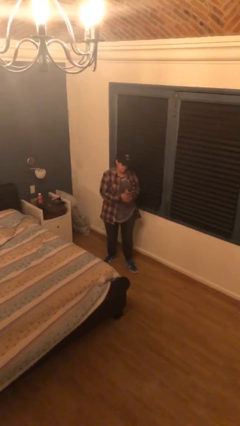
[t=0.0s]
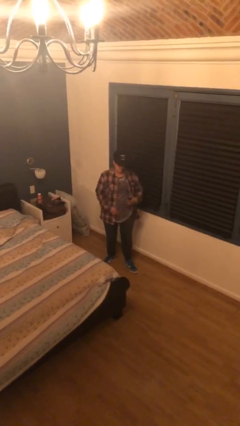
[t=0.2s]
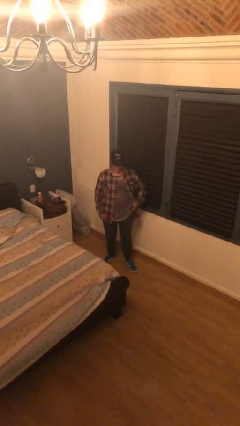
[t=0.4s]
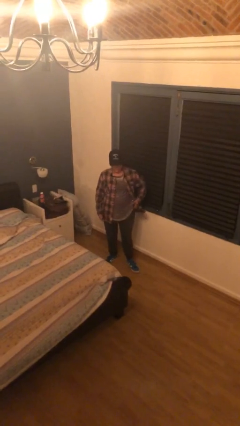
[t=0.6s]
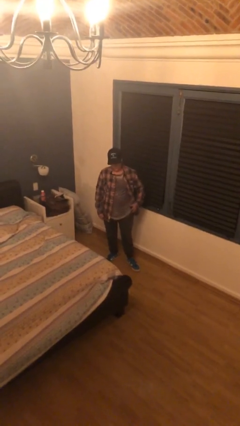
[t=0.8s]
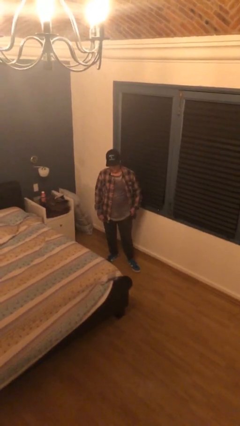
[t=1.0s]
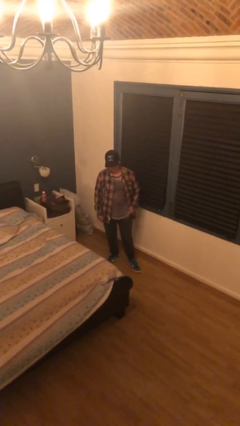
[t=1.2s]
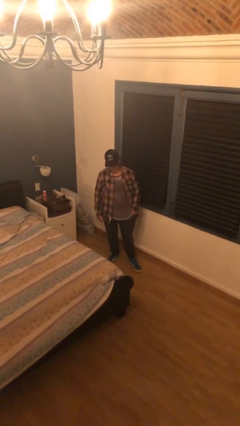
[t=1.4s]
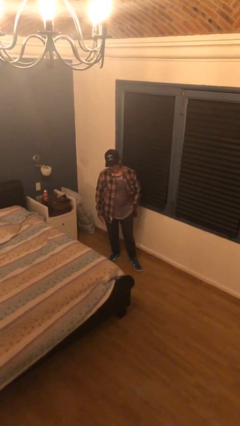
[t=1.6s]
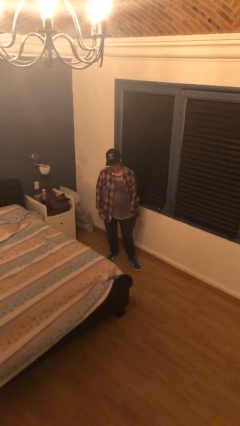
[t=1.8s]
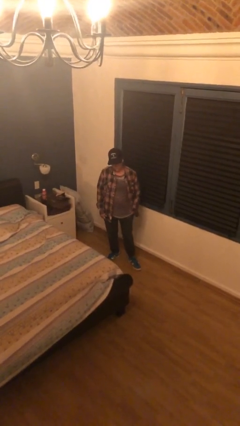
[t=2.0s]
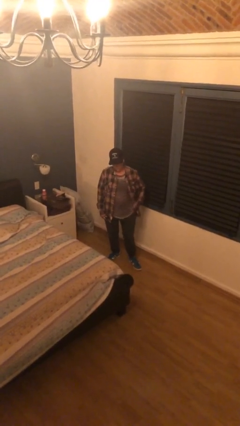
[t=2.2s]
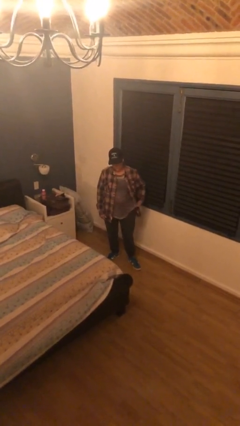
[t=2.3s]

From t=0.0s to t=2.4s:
person puts phone into pocket

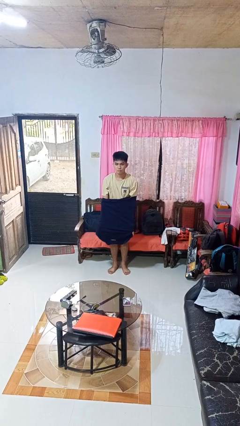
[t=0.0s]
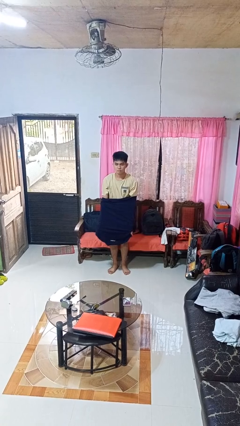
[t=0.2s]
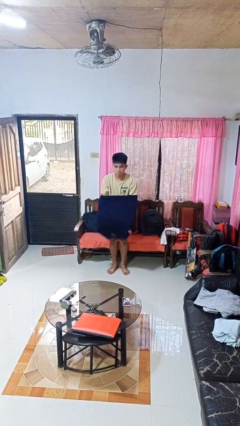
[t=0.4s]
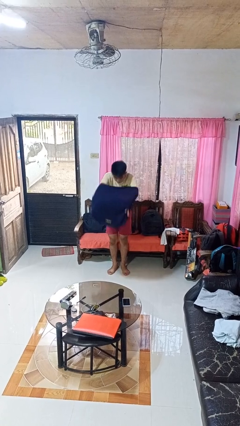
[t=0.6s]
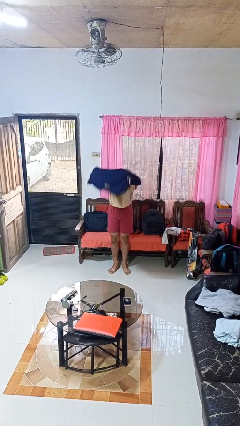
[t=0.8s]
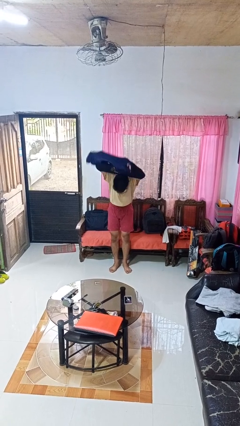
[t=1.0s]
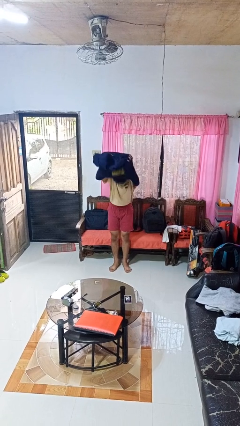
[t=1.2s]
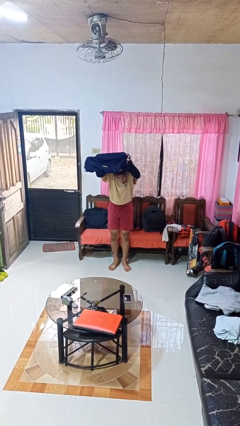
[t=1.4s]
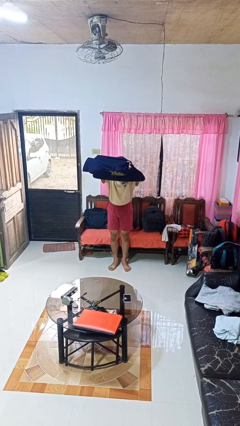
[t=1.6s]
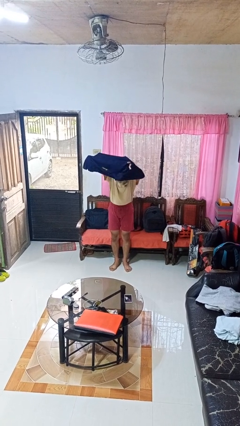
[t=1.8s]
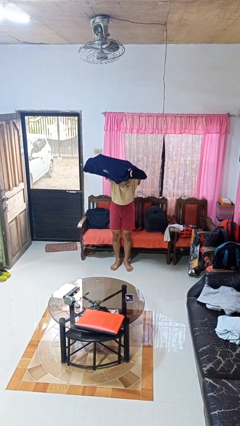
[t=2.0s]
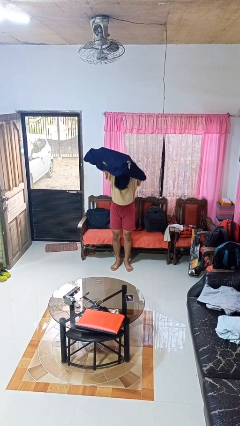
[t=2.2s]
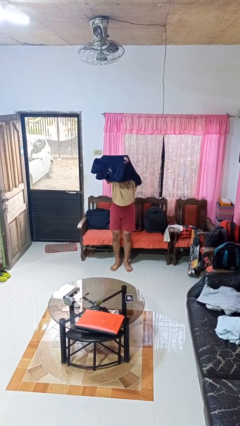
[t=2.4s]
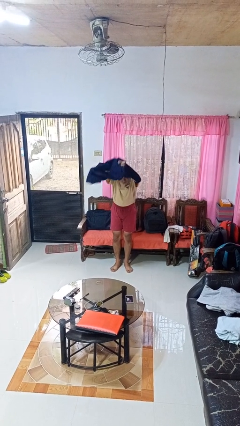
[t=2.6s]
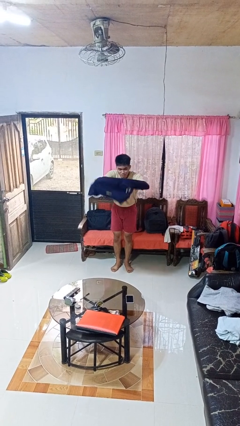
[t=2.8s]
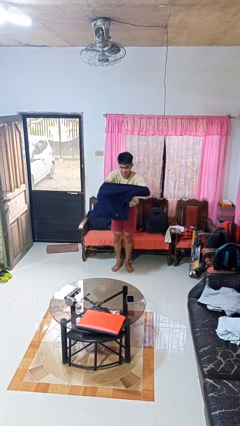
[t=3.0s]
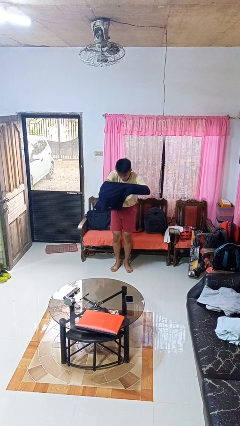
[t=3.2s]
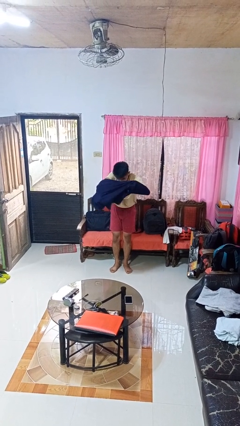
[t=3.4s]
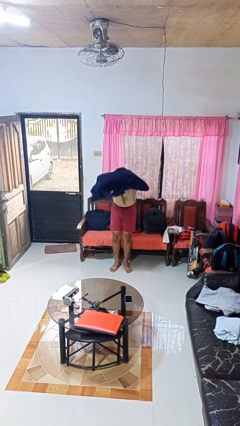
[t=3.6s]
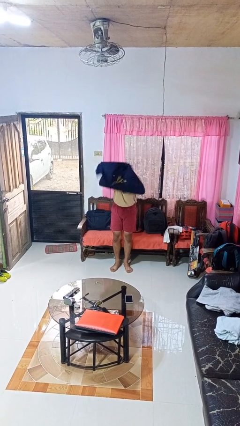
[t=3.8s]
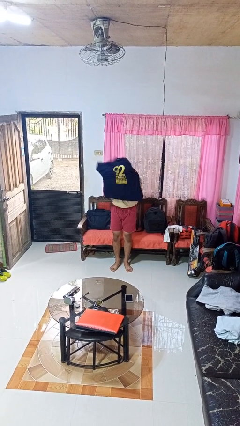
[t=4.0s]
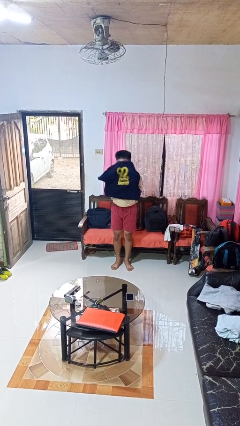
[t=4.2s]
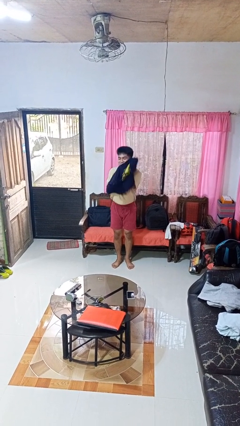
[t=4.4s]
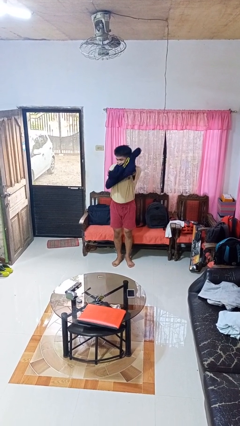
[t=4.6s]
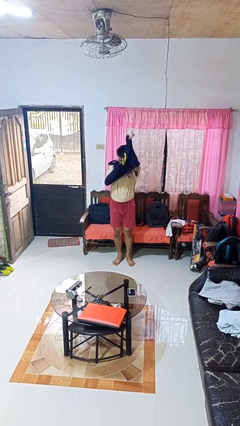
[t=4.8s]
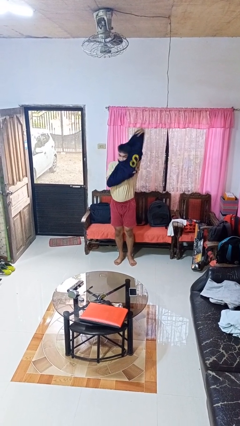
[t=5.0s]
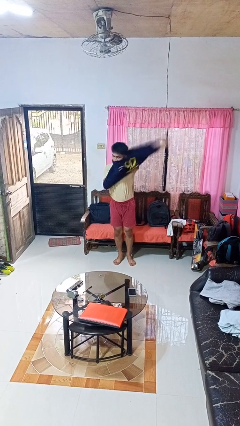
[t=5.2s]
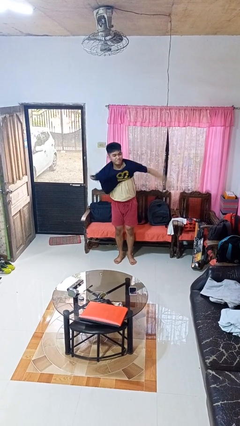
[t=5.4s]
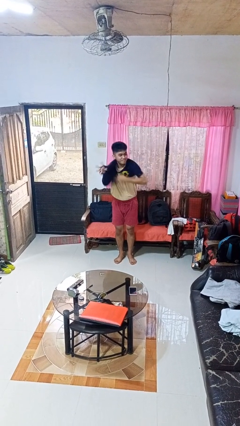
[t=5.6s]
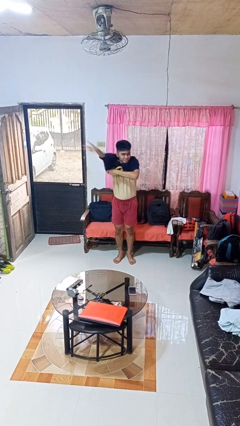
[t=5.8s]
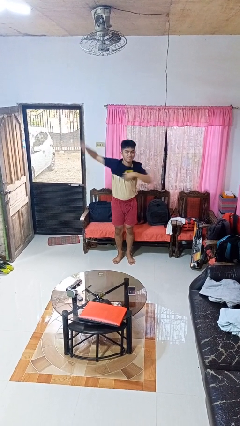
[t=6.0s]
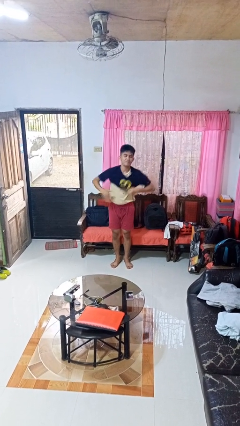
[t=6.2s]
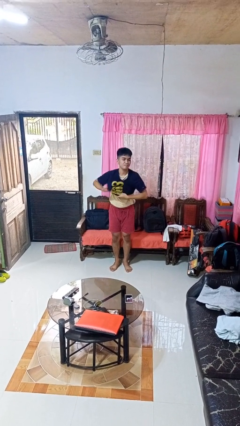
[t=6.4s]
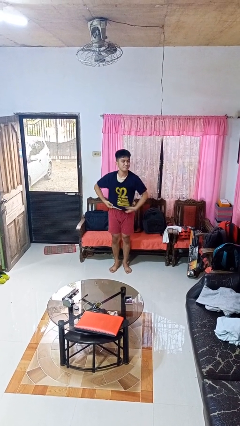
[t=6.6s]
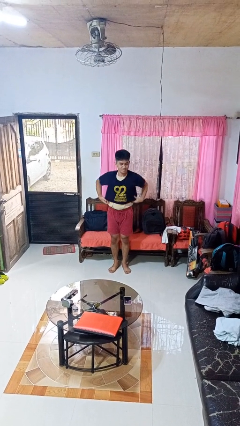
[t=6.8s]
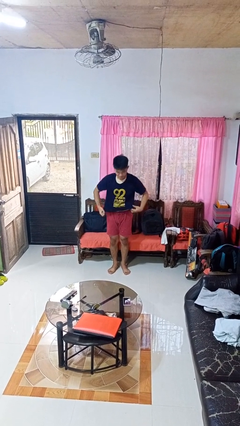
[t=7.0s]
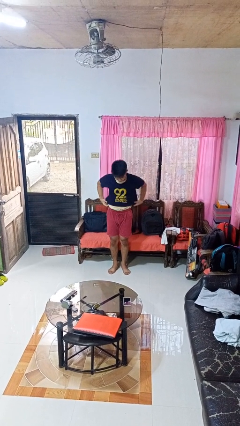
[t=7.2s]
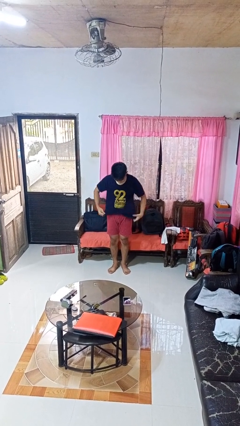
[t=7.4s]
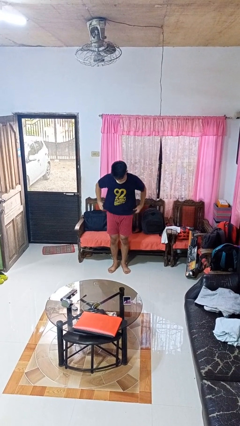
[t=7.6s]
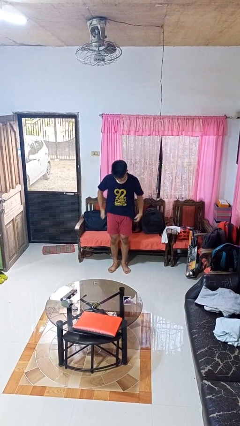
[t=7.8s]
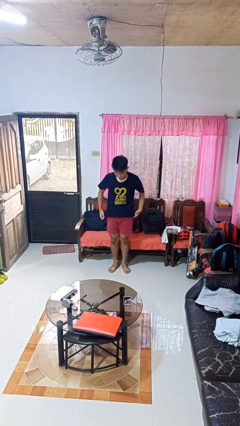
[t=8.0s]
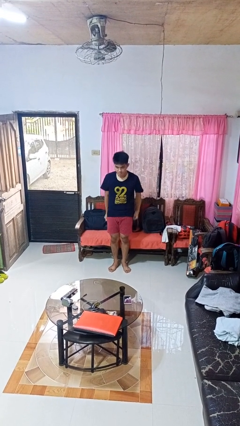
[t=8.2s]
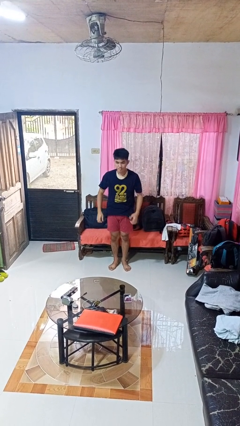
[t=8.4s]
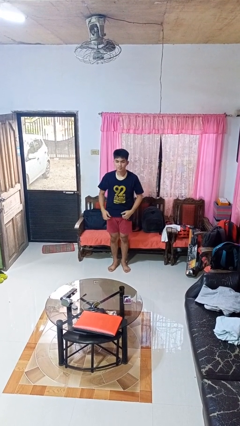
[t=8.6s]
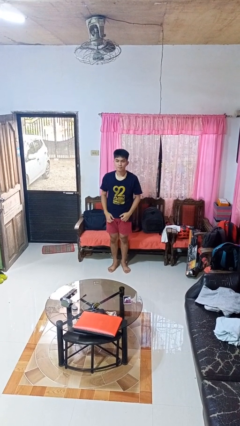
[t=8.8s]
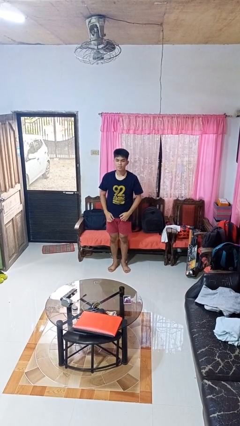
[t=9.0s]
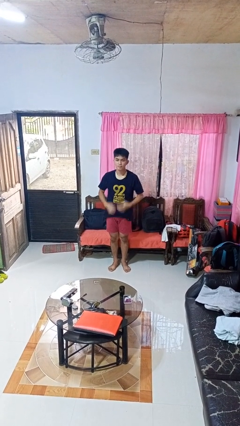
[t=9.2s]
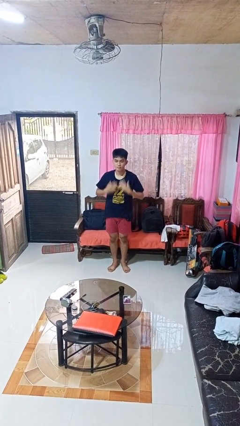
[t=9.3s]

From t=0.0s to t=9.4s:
person puts on shirt

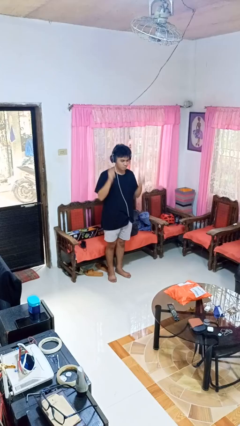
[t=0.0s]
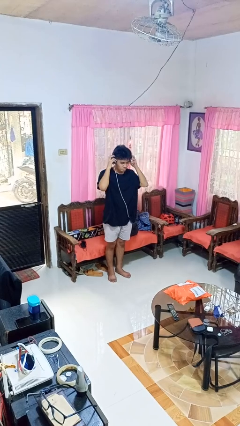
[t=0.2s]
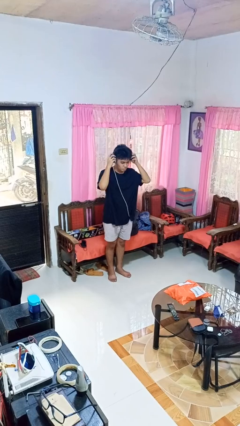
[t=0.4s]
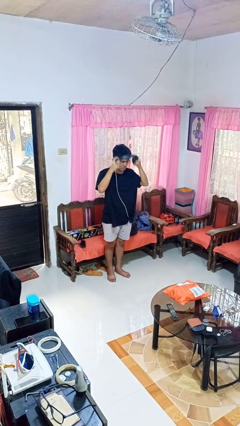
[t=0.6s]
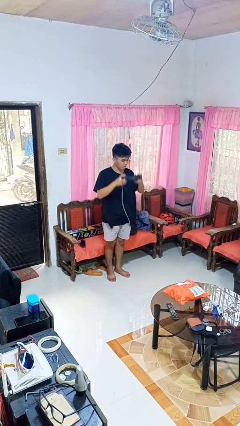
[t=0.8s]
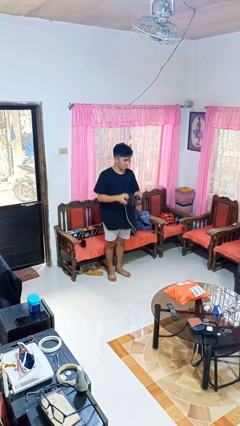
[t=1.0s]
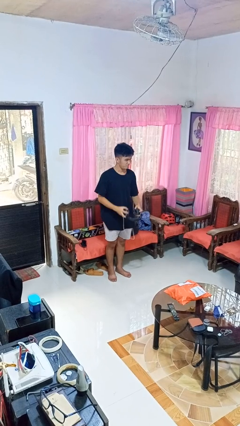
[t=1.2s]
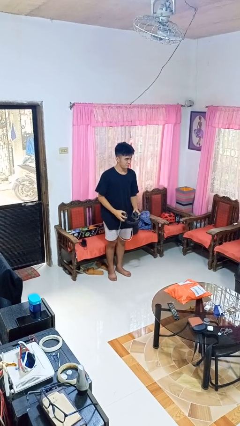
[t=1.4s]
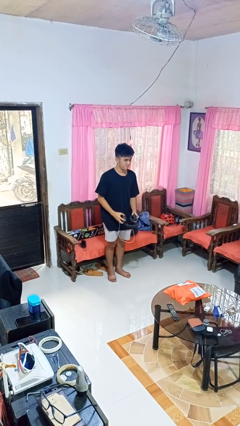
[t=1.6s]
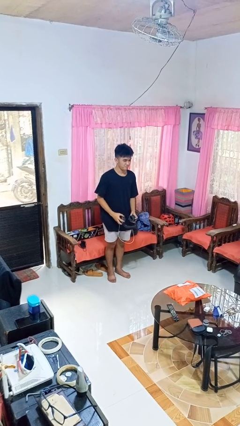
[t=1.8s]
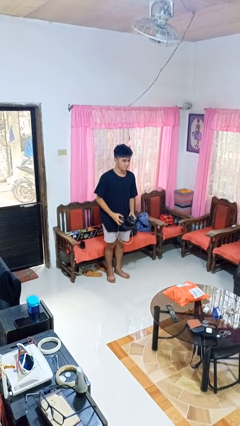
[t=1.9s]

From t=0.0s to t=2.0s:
person takes off headphones

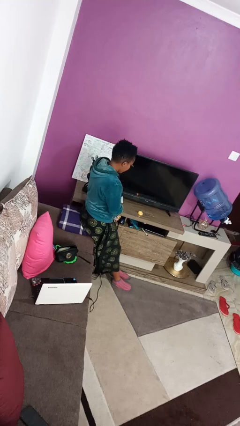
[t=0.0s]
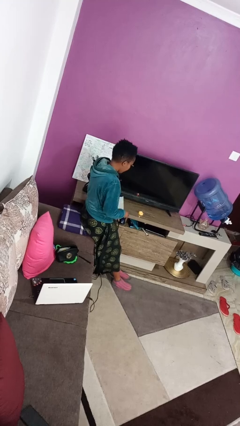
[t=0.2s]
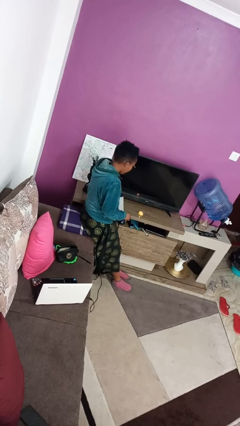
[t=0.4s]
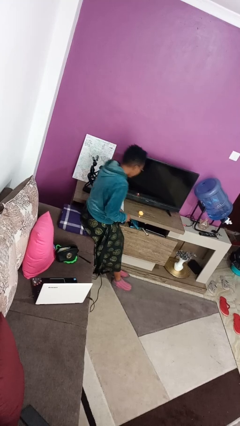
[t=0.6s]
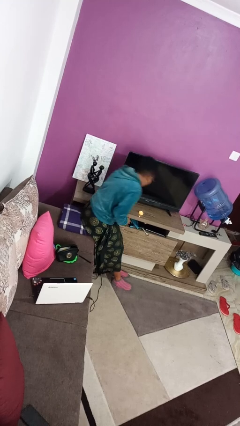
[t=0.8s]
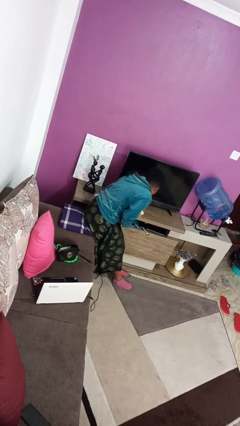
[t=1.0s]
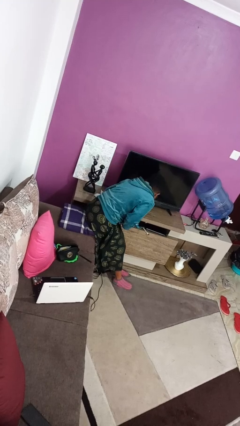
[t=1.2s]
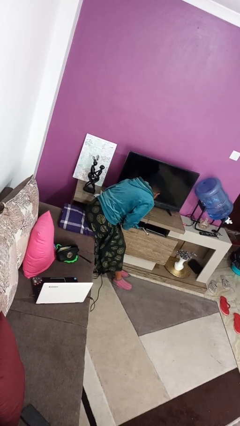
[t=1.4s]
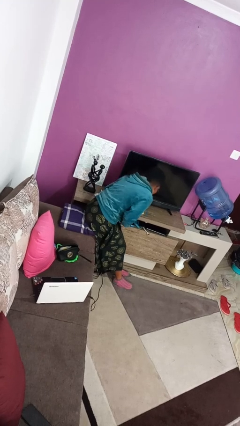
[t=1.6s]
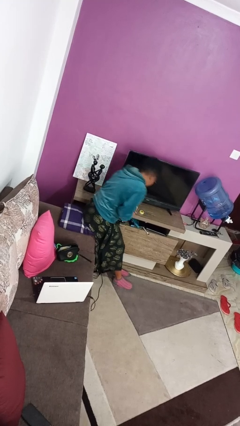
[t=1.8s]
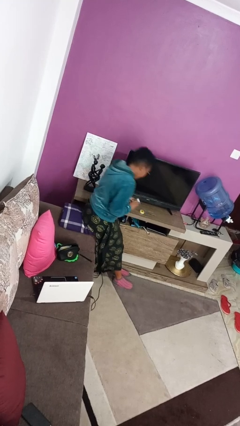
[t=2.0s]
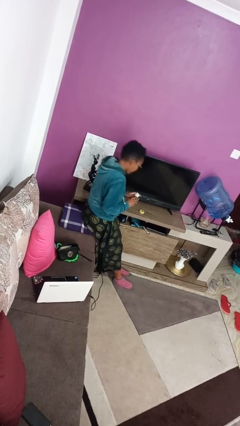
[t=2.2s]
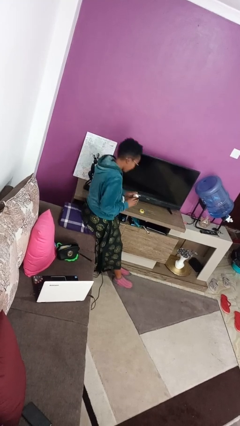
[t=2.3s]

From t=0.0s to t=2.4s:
person extinguishes candle

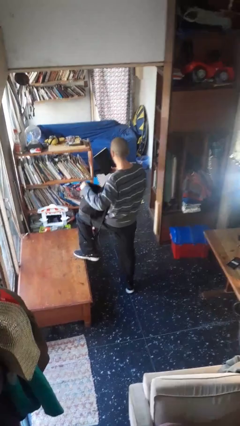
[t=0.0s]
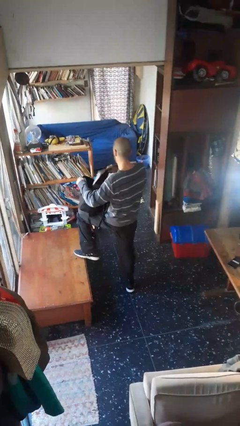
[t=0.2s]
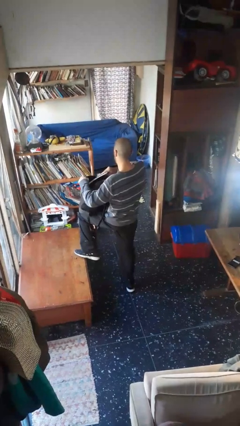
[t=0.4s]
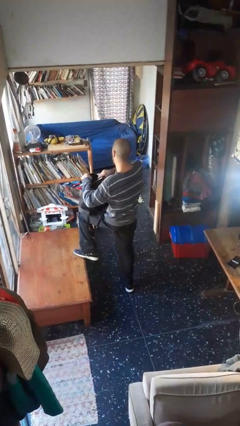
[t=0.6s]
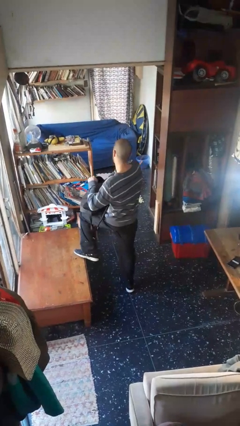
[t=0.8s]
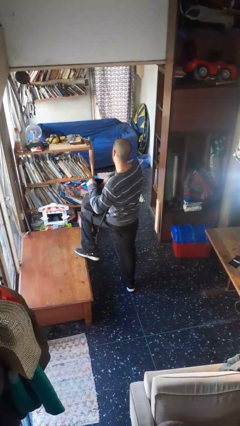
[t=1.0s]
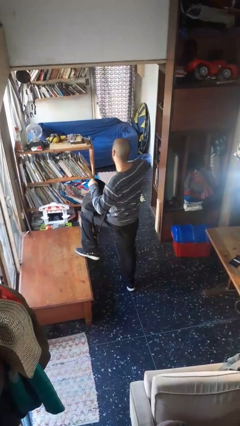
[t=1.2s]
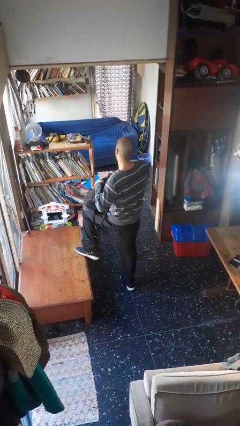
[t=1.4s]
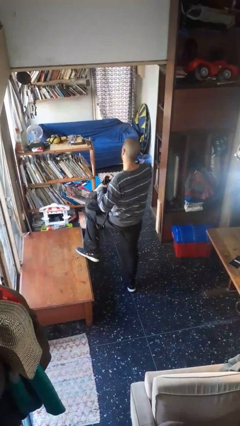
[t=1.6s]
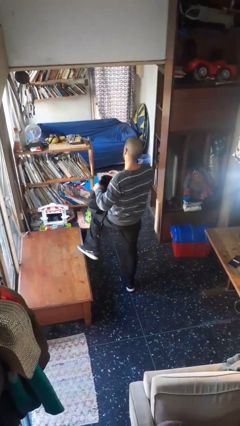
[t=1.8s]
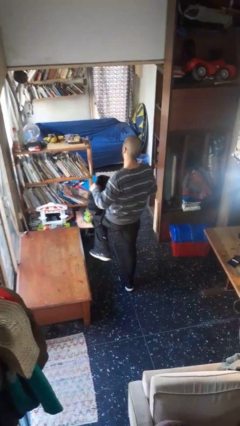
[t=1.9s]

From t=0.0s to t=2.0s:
person puts object into backpack
